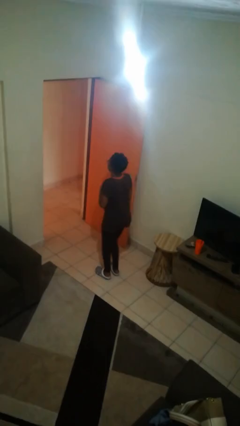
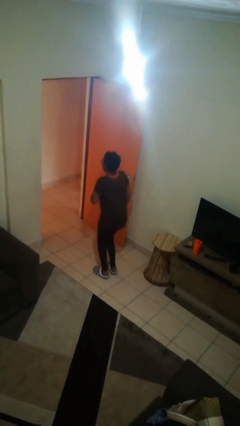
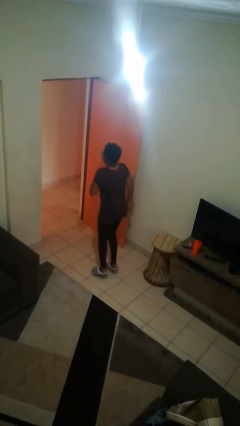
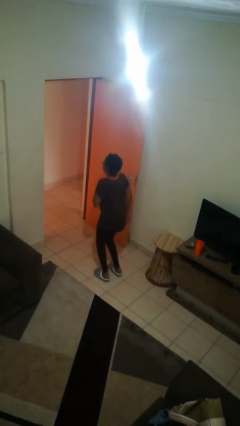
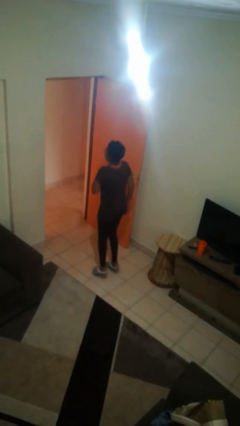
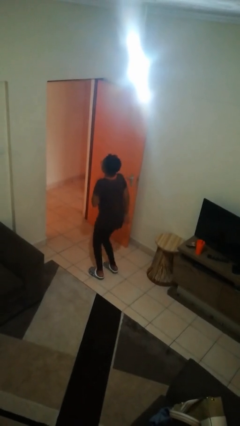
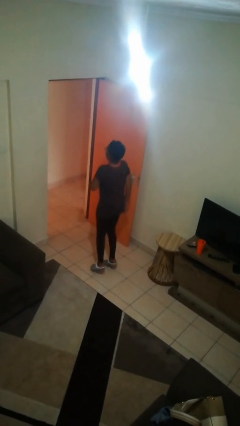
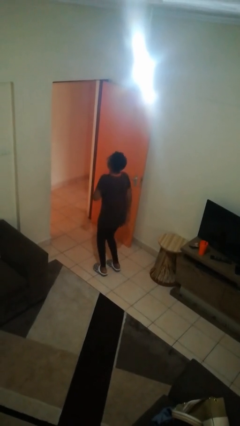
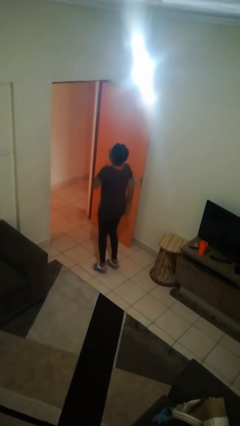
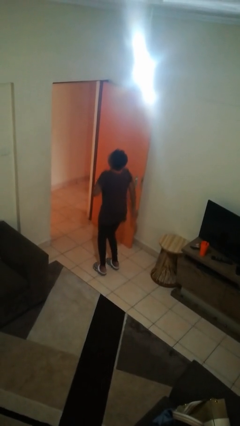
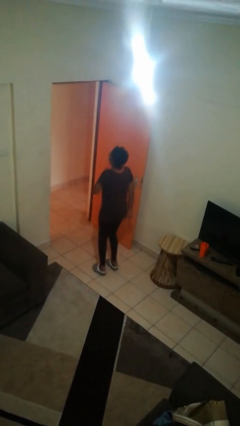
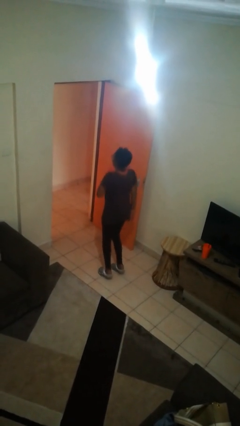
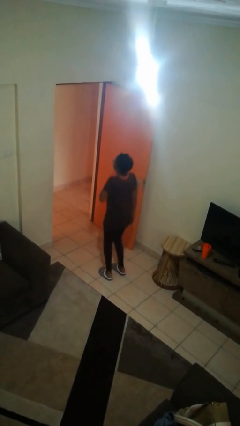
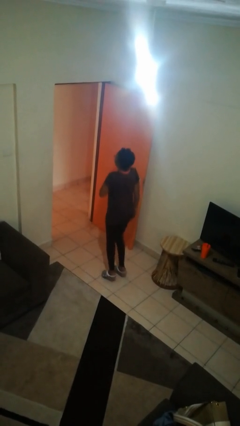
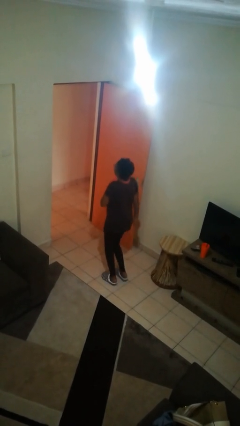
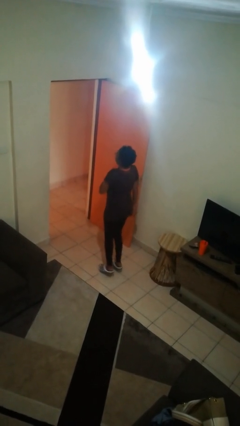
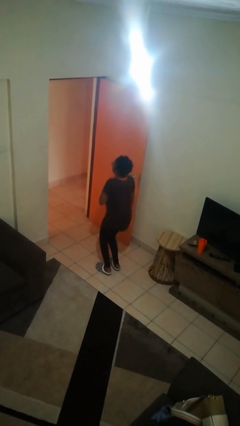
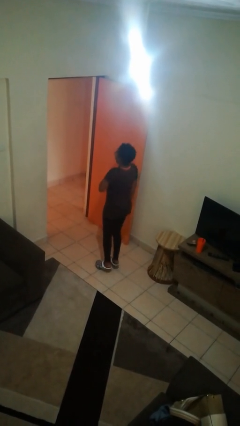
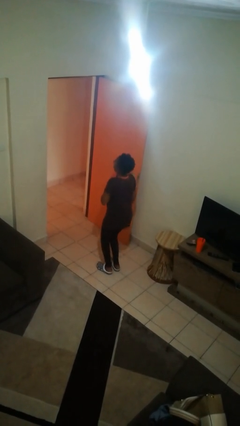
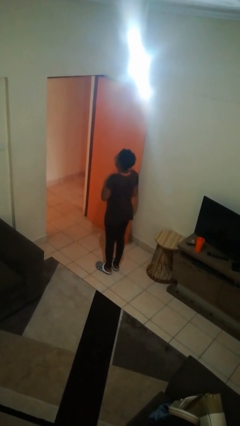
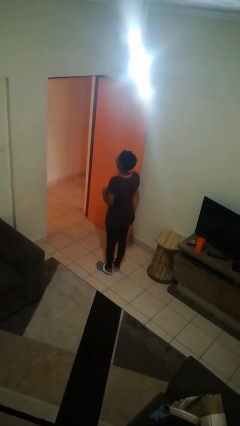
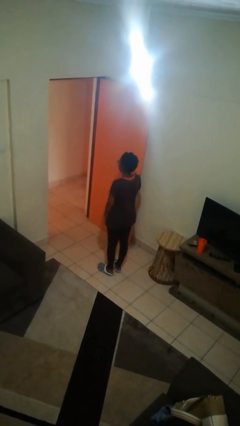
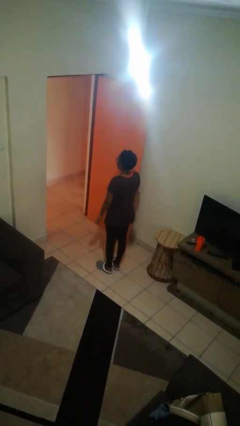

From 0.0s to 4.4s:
person jumps

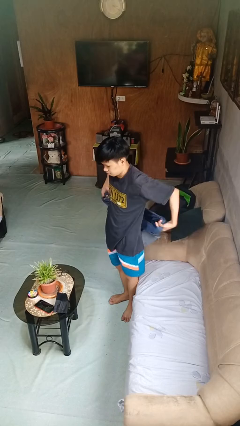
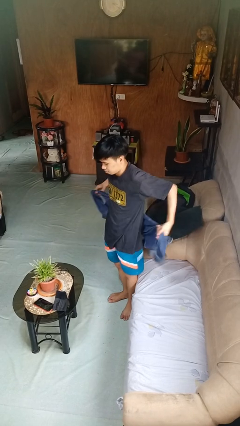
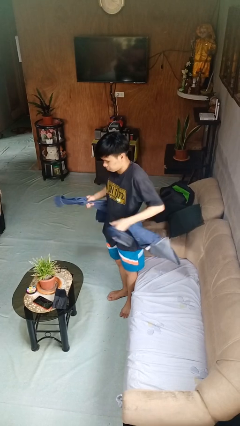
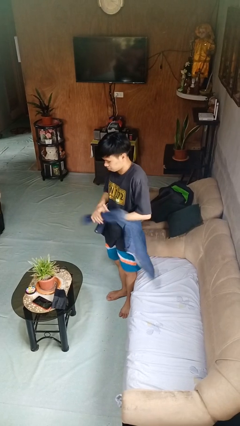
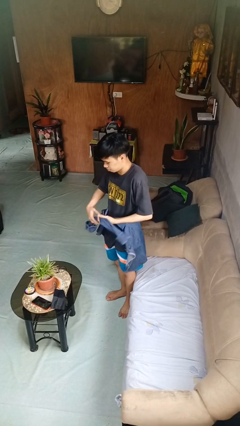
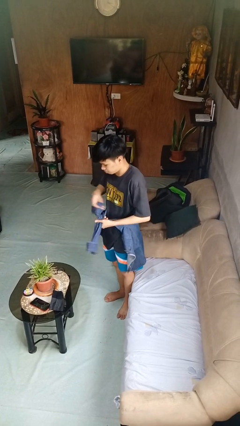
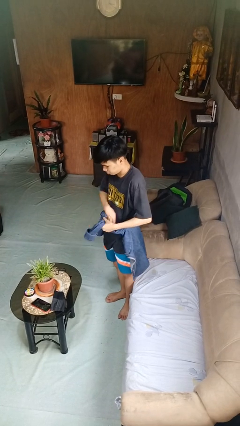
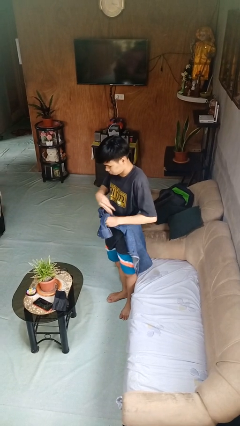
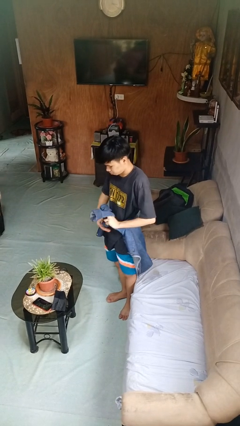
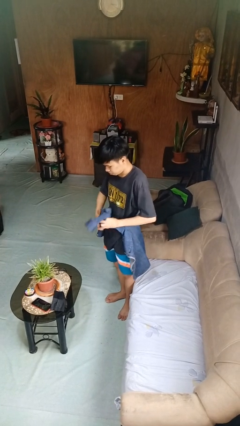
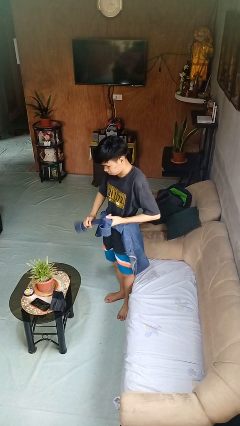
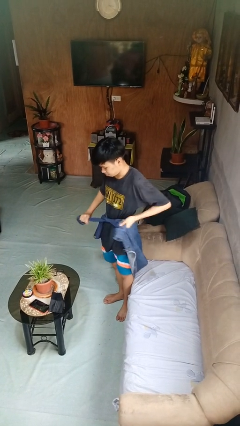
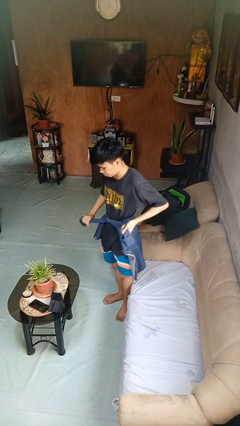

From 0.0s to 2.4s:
person ties jacket around waist

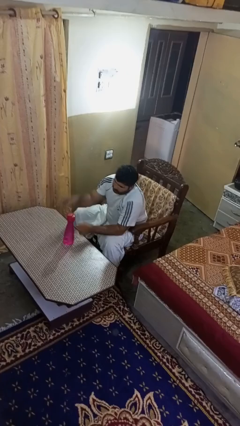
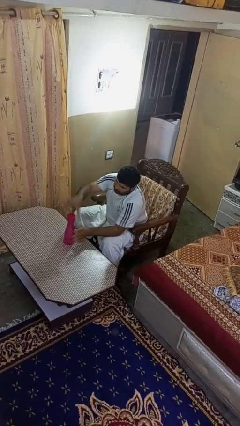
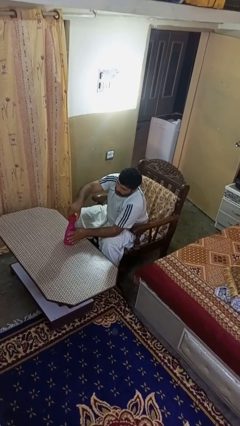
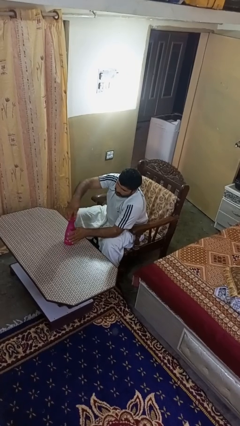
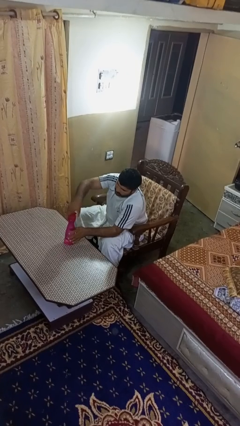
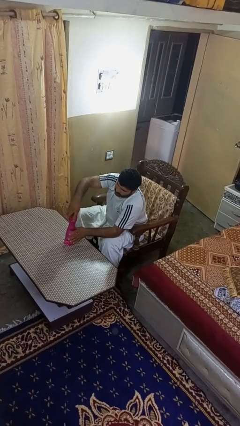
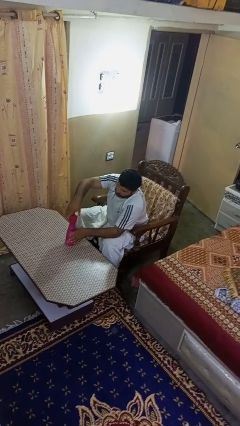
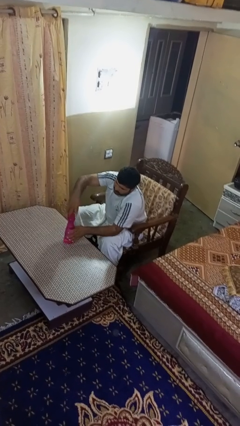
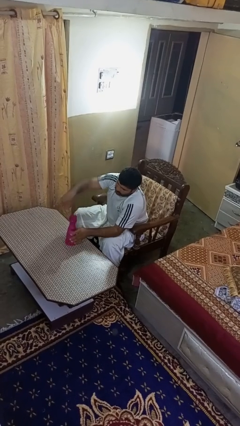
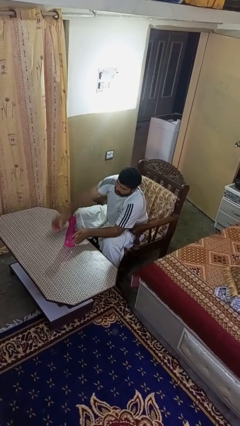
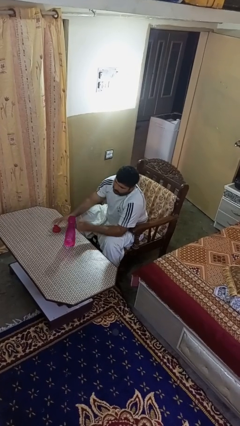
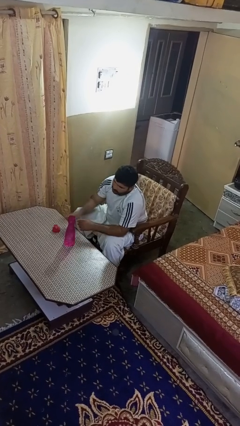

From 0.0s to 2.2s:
person unscrews lid from bottle

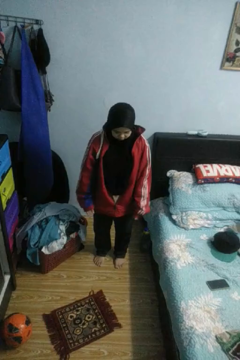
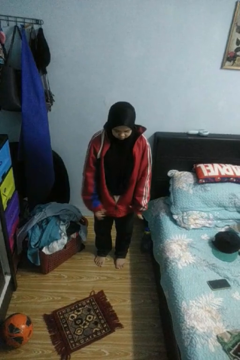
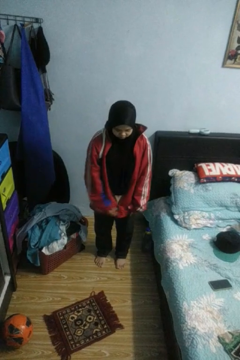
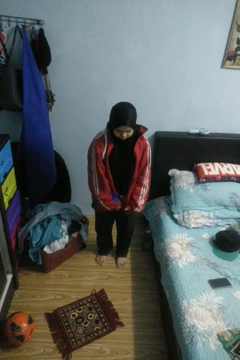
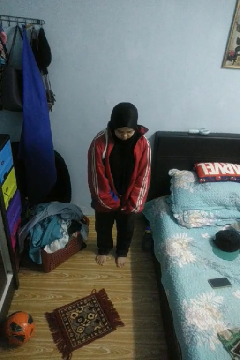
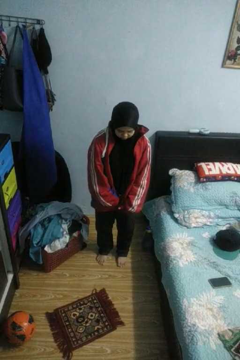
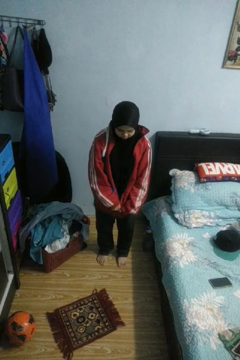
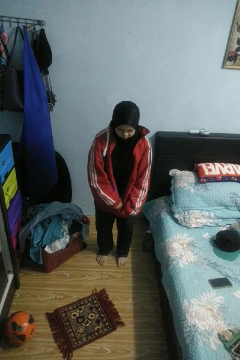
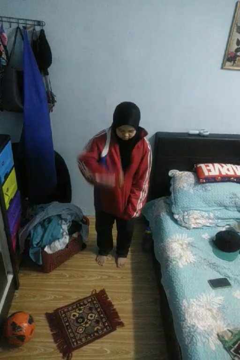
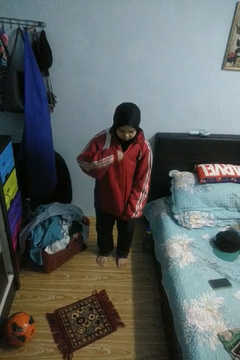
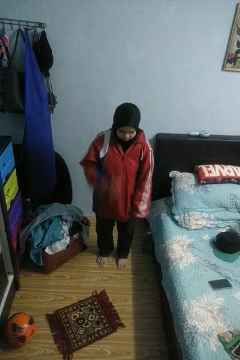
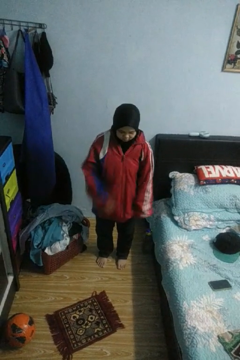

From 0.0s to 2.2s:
person zips up jacket

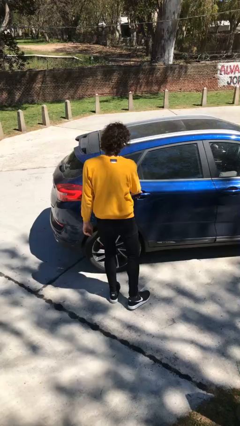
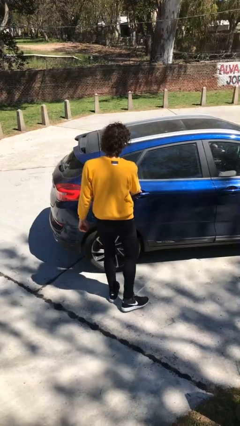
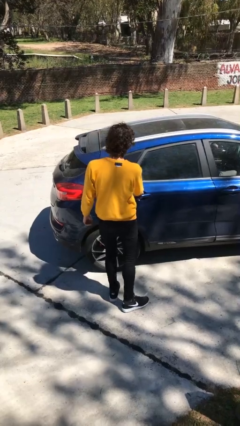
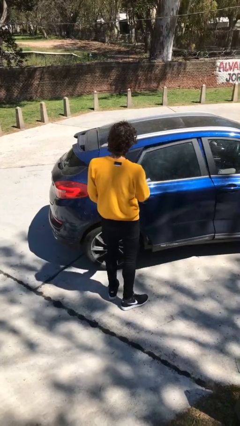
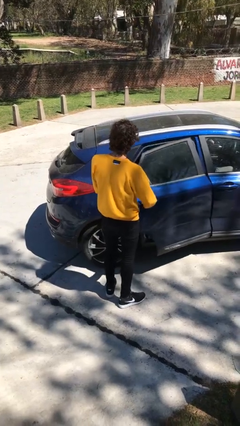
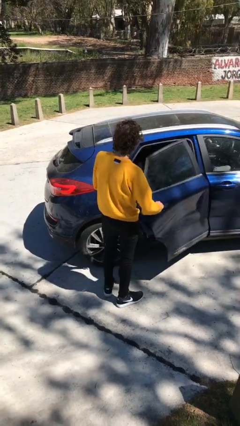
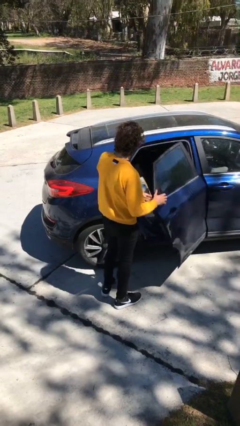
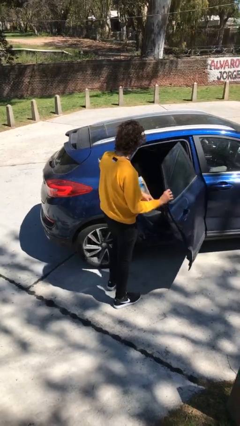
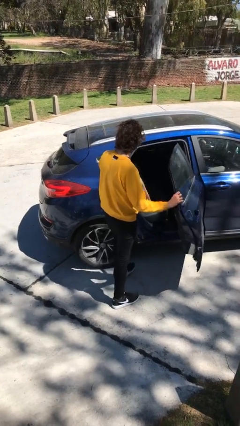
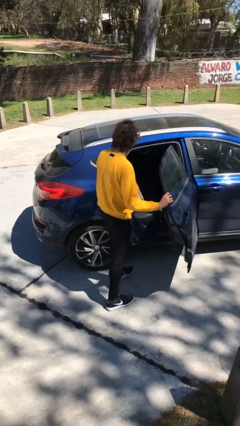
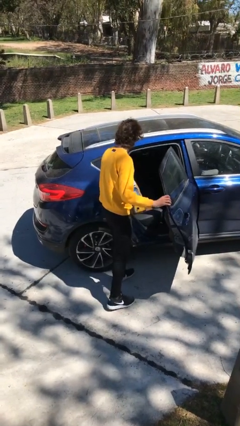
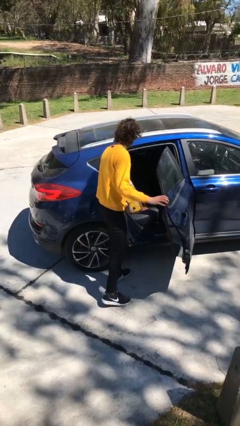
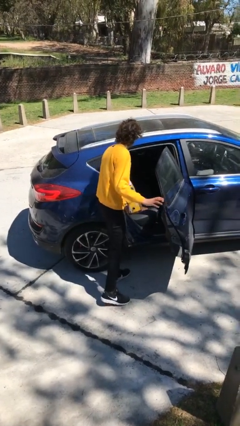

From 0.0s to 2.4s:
person opens car door

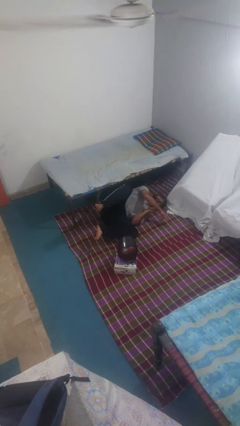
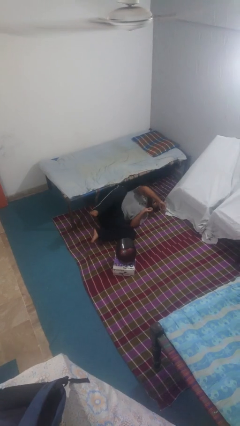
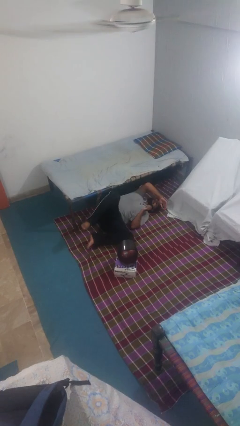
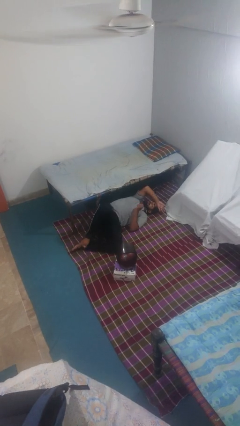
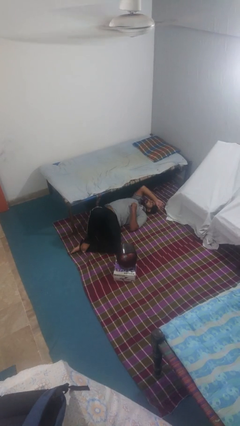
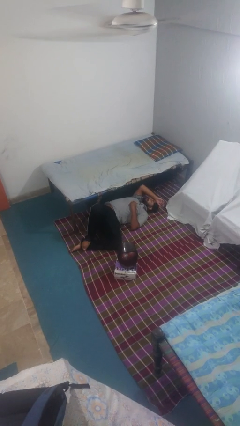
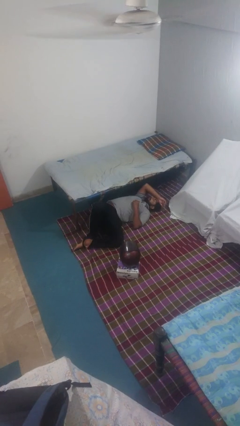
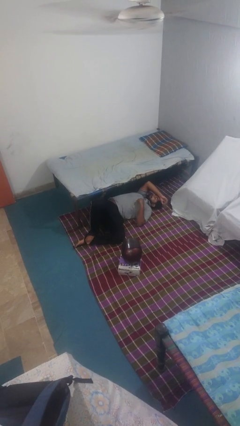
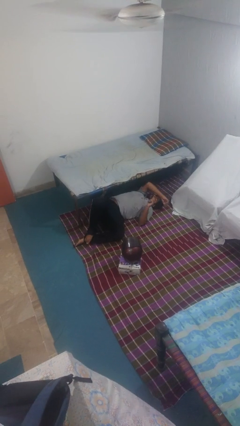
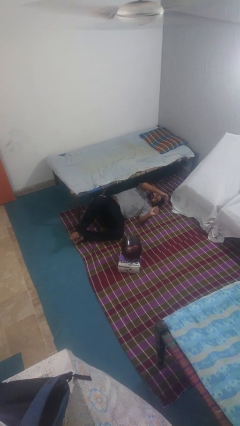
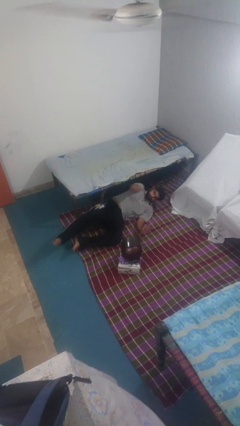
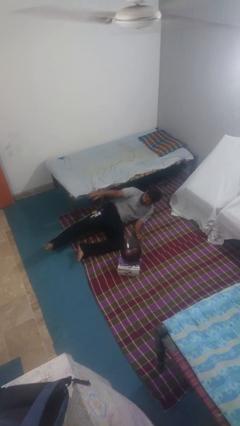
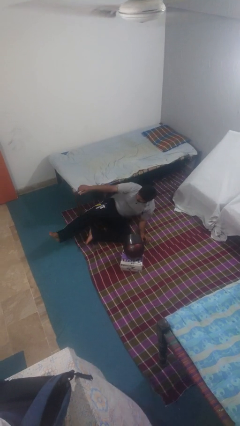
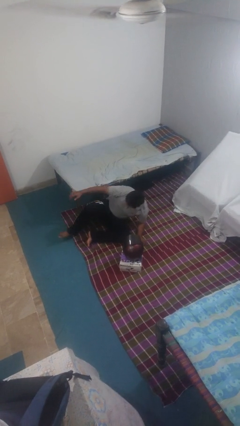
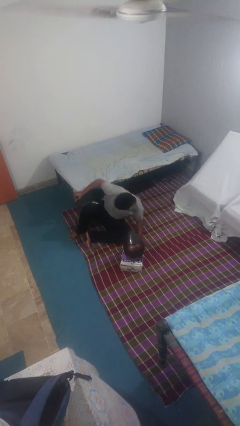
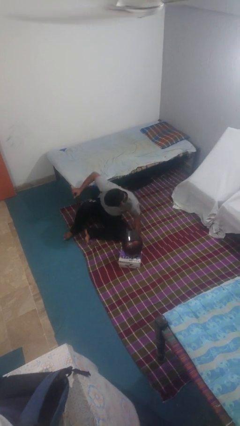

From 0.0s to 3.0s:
person lies down on floor

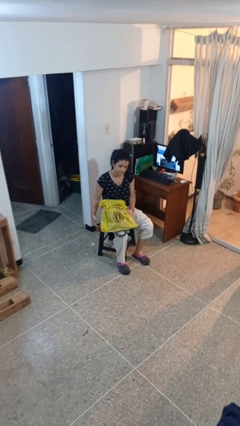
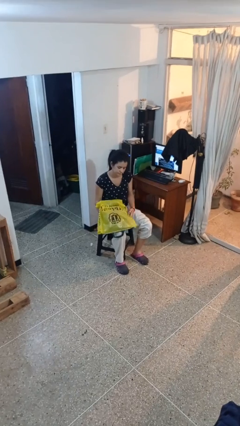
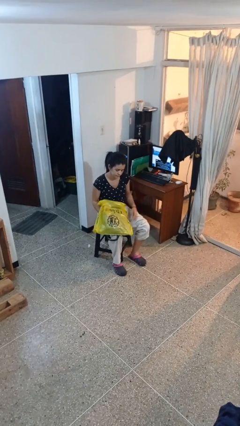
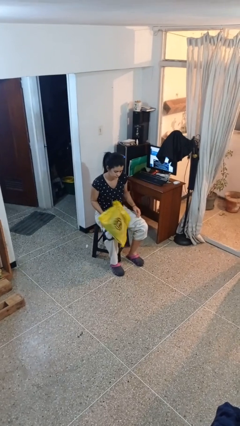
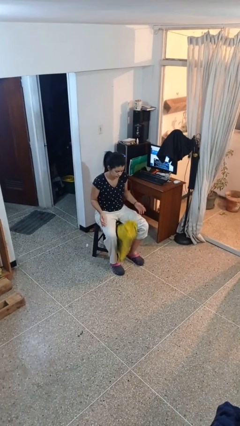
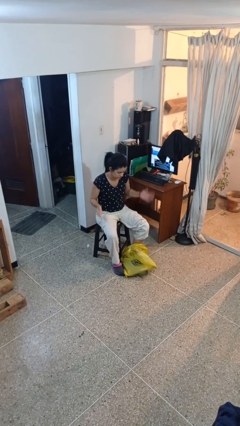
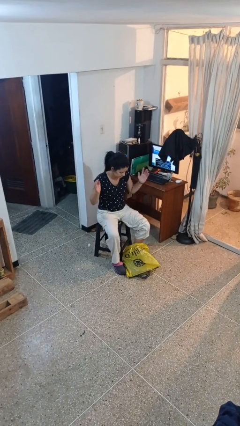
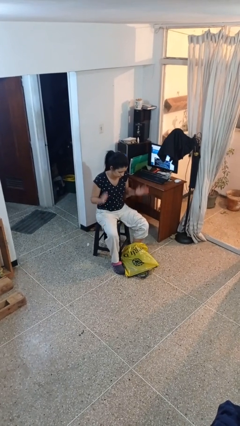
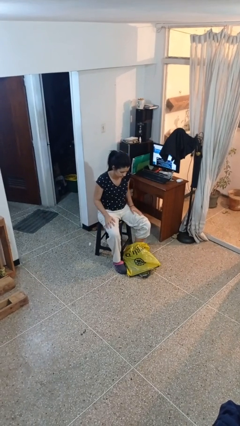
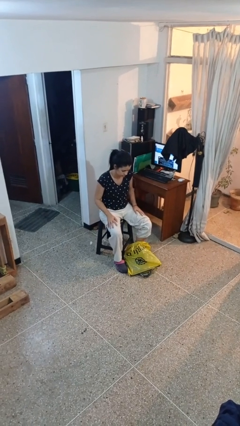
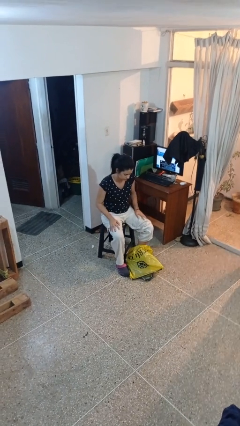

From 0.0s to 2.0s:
person drops object
